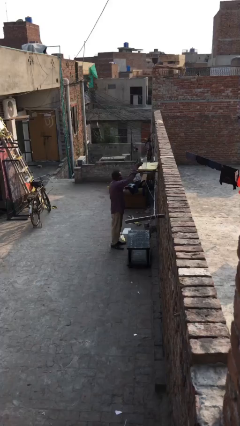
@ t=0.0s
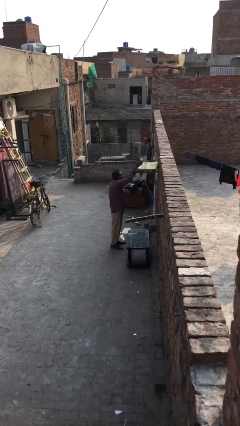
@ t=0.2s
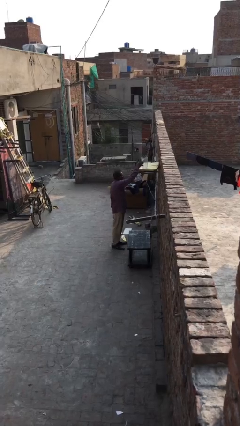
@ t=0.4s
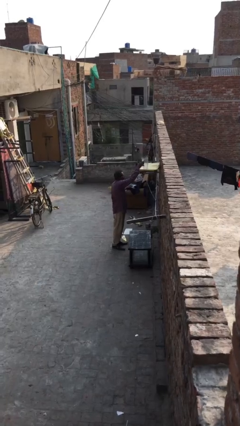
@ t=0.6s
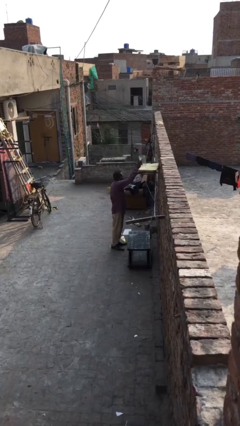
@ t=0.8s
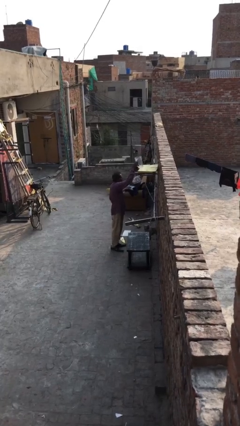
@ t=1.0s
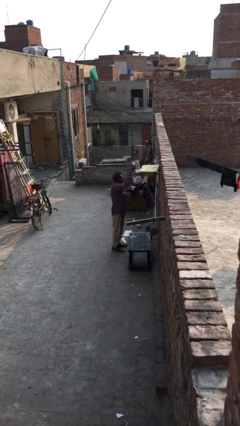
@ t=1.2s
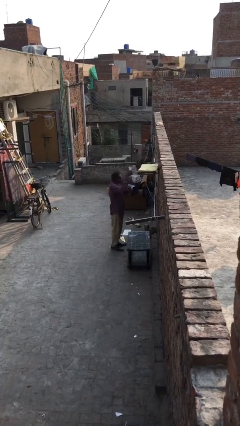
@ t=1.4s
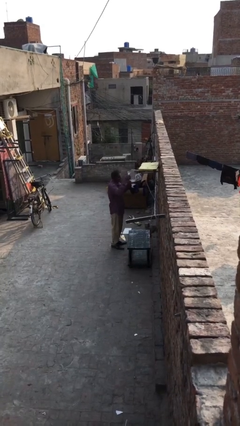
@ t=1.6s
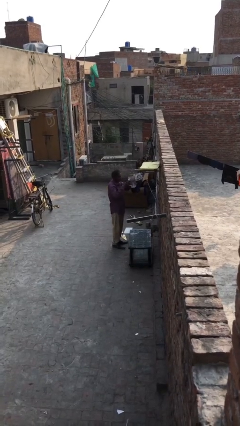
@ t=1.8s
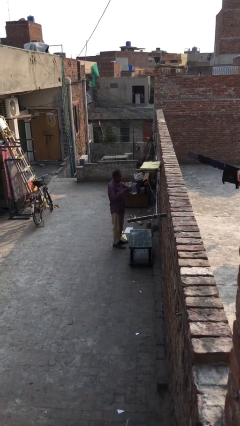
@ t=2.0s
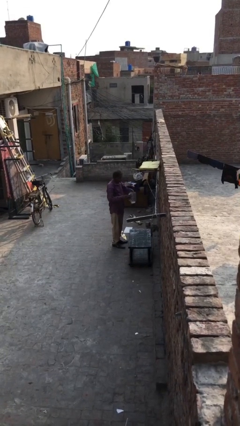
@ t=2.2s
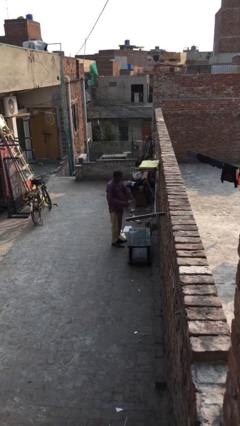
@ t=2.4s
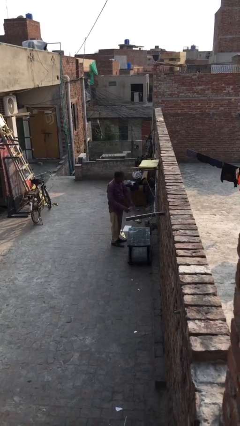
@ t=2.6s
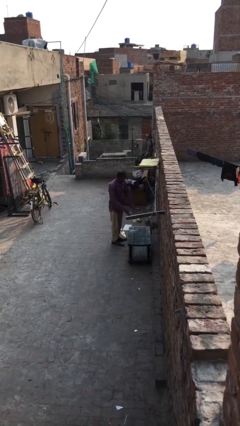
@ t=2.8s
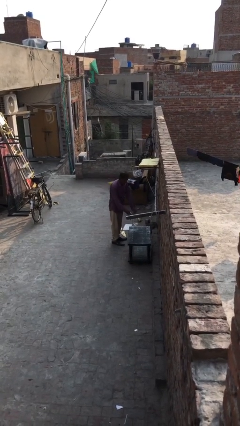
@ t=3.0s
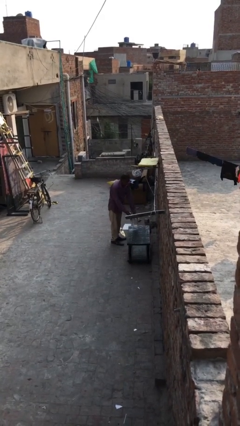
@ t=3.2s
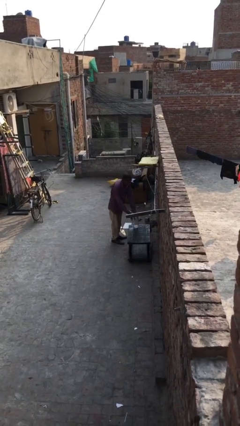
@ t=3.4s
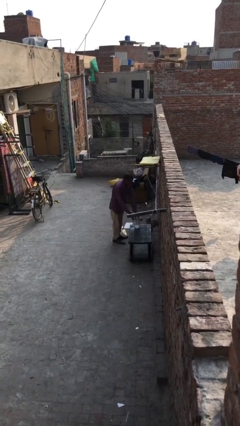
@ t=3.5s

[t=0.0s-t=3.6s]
person picks up object from shelf

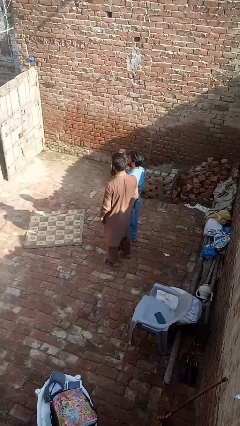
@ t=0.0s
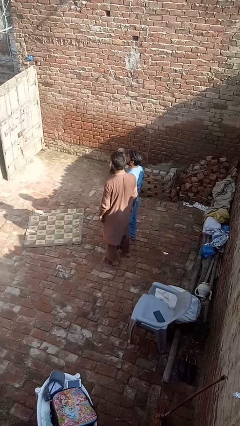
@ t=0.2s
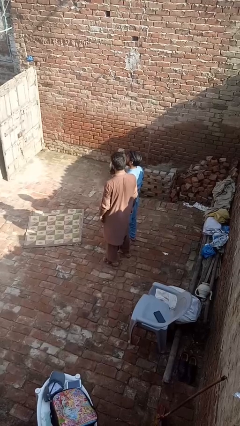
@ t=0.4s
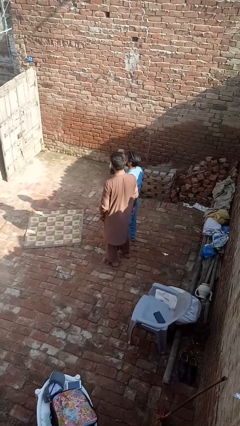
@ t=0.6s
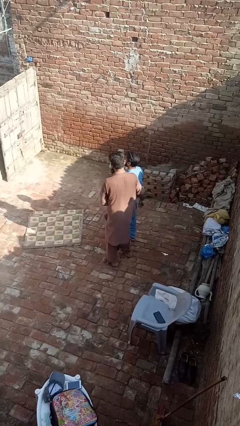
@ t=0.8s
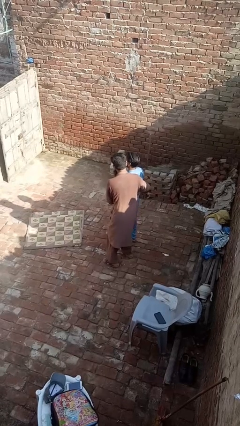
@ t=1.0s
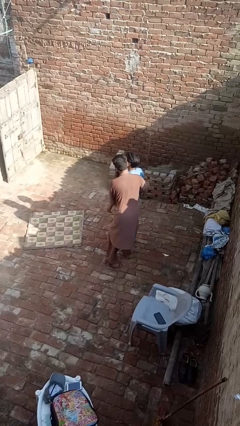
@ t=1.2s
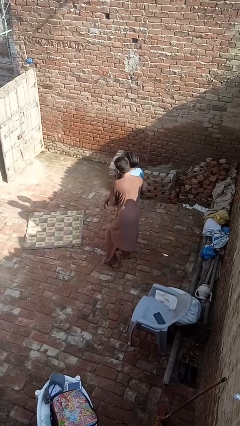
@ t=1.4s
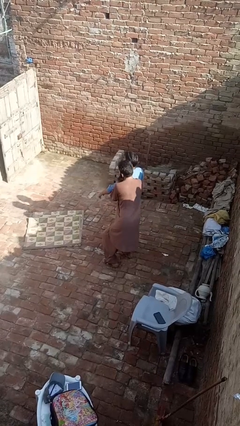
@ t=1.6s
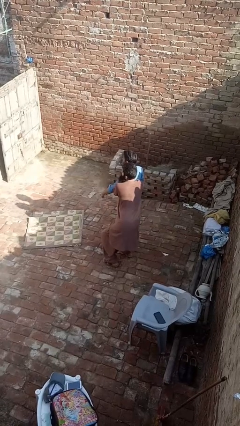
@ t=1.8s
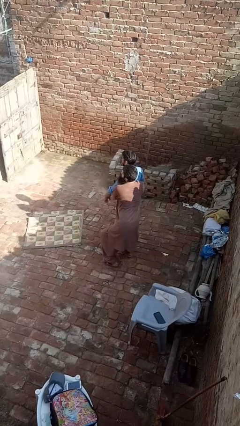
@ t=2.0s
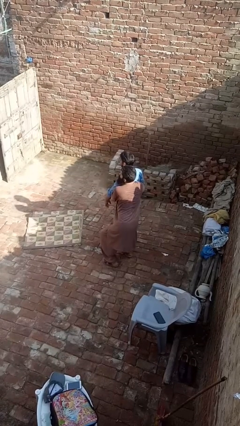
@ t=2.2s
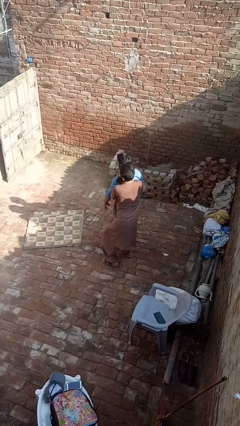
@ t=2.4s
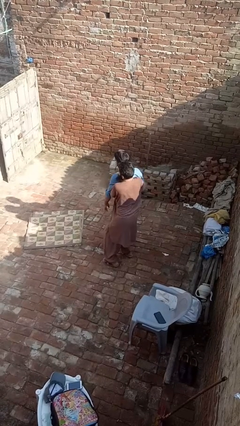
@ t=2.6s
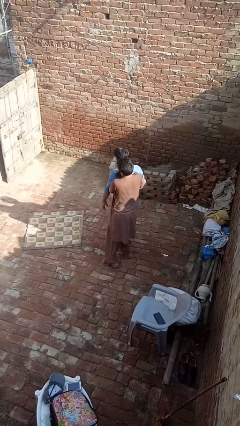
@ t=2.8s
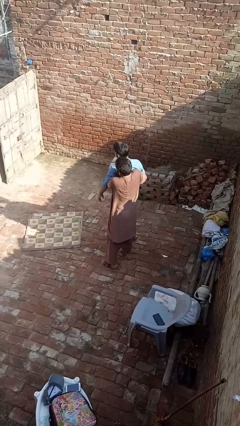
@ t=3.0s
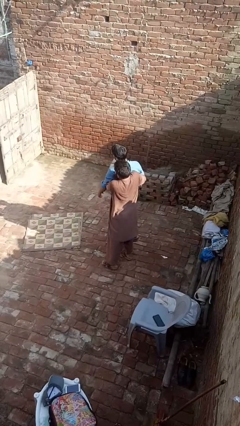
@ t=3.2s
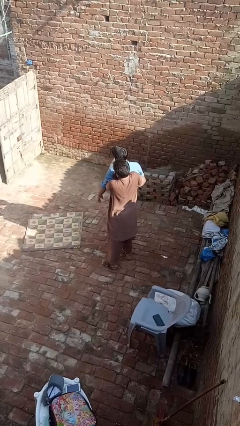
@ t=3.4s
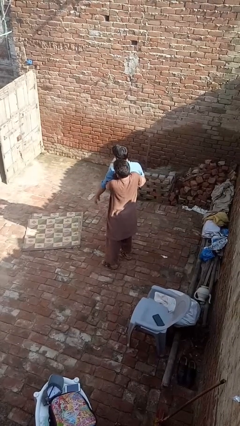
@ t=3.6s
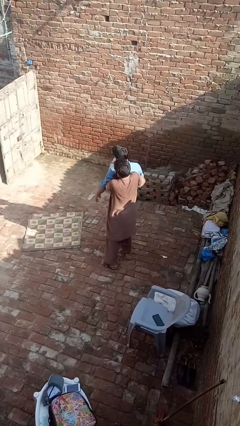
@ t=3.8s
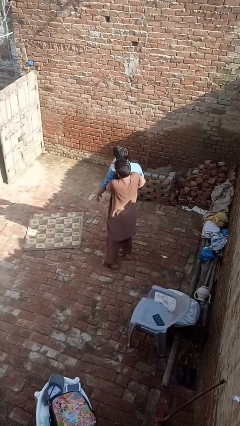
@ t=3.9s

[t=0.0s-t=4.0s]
person picks up person

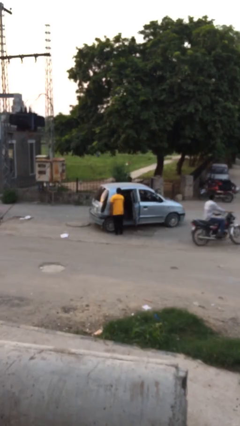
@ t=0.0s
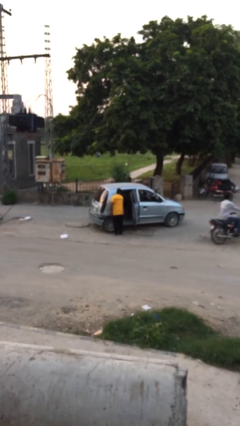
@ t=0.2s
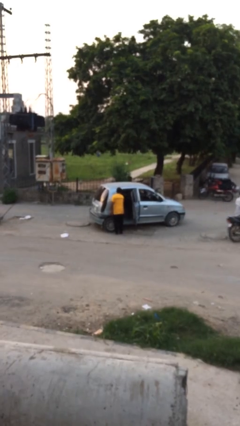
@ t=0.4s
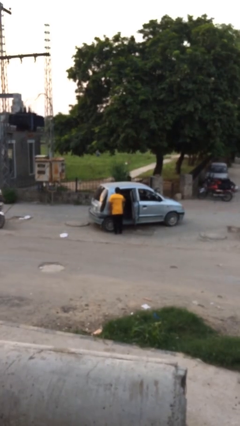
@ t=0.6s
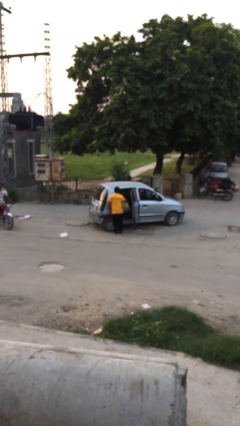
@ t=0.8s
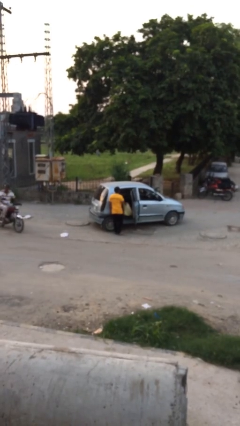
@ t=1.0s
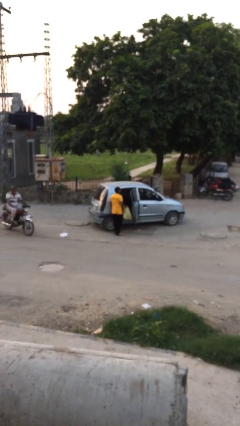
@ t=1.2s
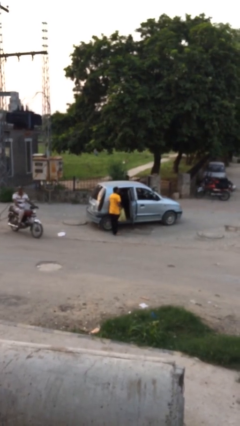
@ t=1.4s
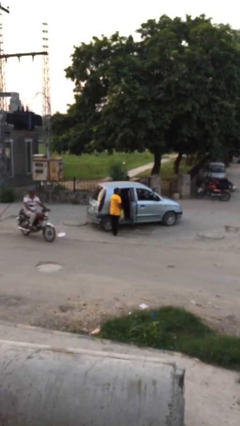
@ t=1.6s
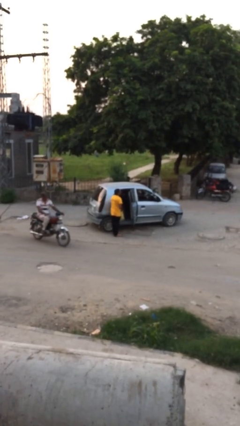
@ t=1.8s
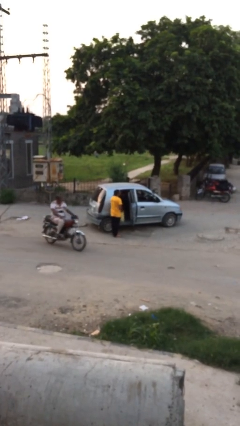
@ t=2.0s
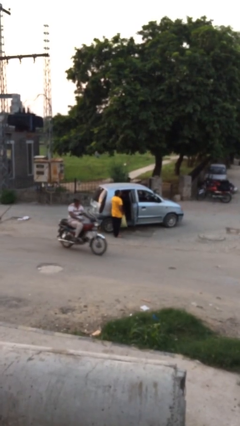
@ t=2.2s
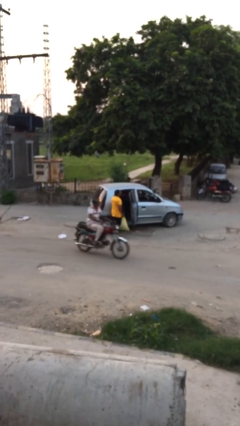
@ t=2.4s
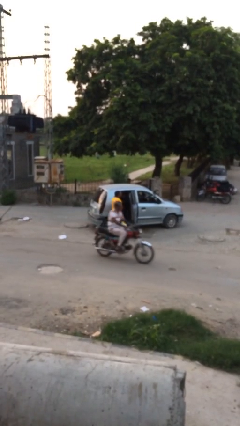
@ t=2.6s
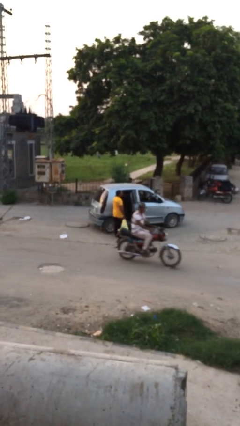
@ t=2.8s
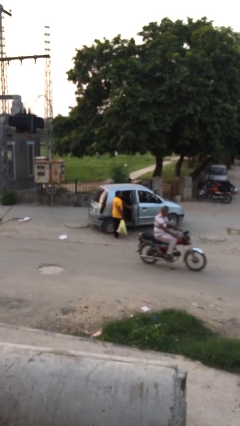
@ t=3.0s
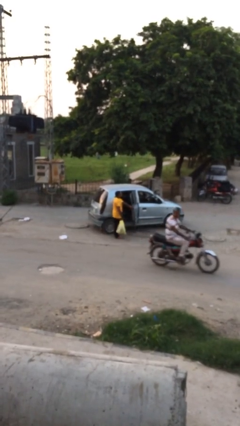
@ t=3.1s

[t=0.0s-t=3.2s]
person unloads car

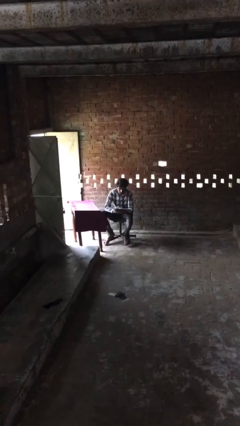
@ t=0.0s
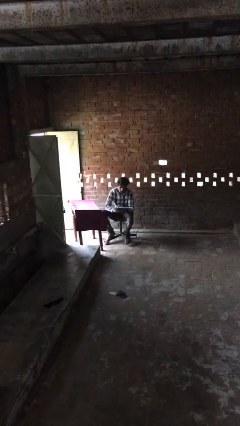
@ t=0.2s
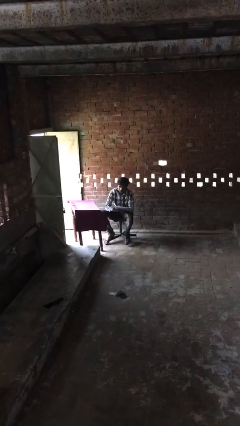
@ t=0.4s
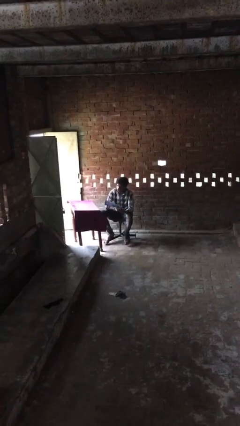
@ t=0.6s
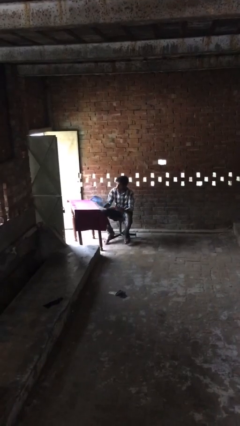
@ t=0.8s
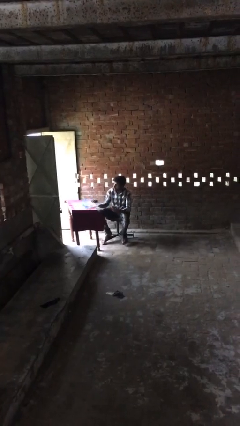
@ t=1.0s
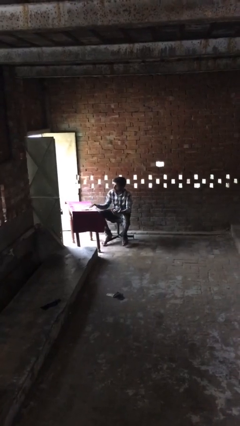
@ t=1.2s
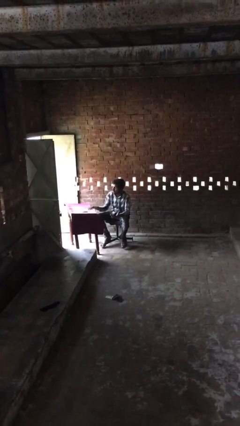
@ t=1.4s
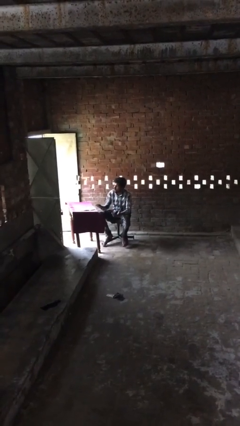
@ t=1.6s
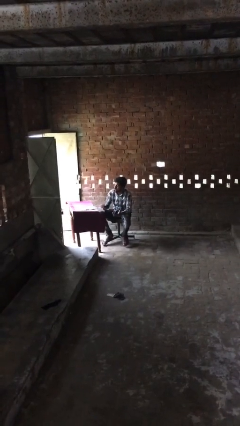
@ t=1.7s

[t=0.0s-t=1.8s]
person puts down object on table

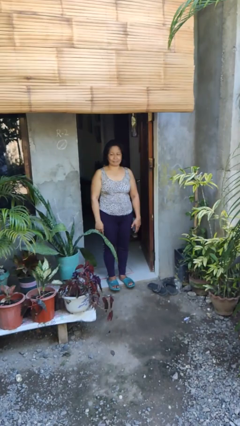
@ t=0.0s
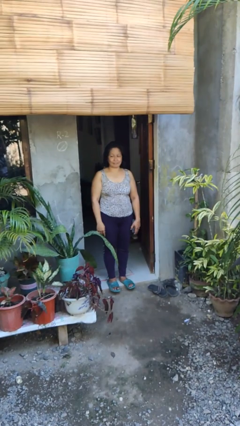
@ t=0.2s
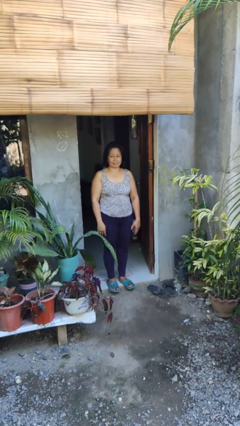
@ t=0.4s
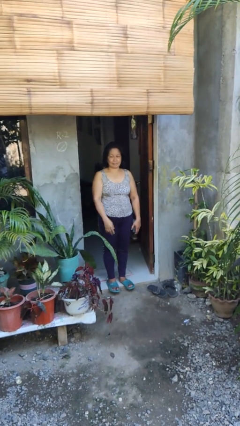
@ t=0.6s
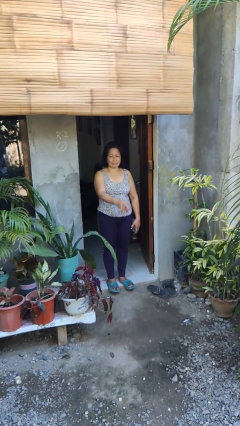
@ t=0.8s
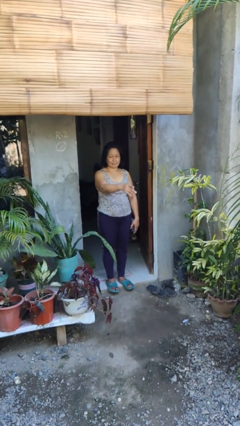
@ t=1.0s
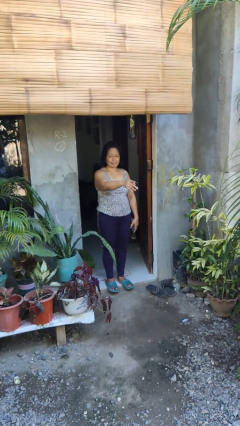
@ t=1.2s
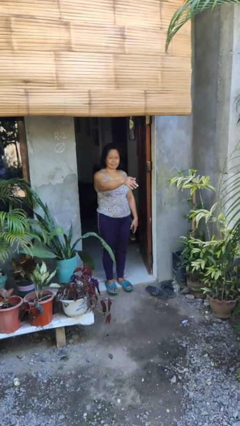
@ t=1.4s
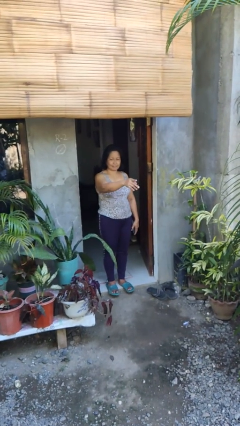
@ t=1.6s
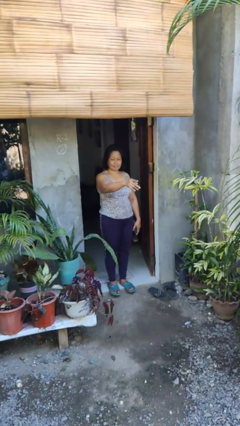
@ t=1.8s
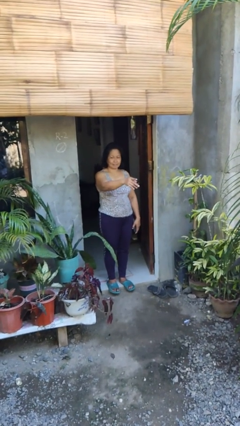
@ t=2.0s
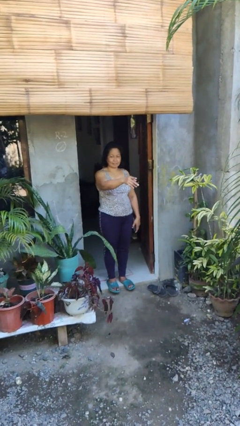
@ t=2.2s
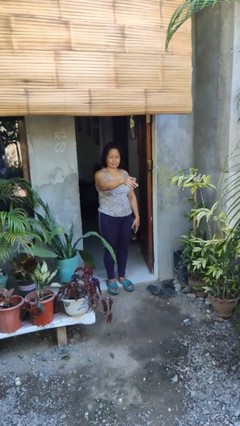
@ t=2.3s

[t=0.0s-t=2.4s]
person points at person

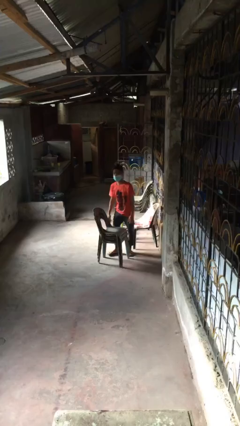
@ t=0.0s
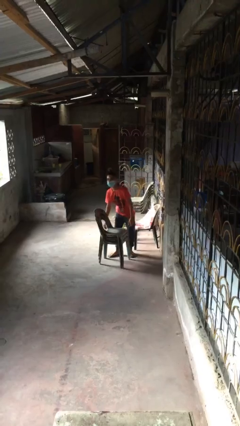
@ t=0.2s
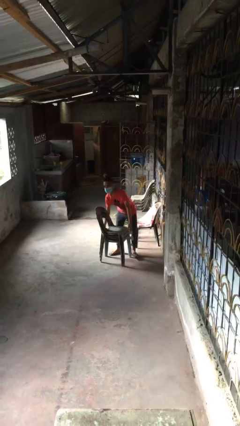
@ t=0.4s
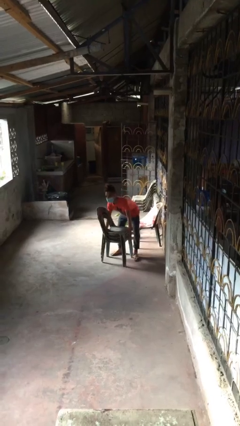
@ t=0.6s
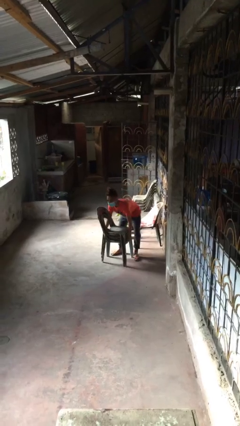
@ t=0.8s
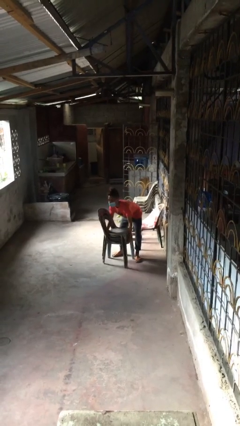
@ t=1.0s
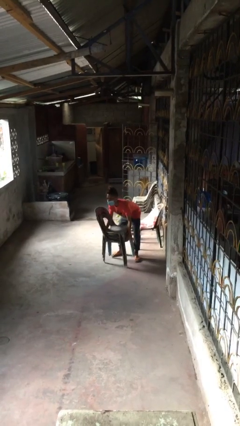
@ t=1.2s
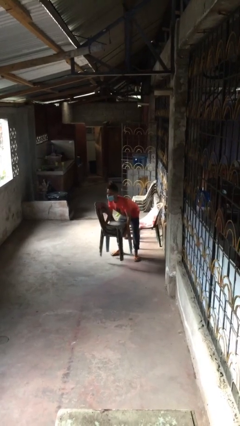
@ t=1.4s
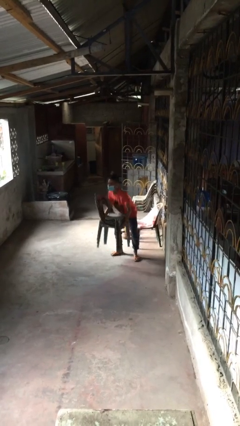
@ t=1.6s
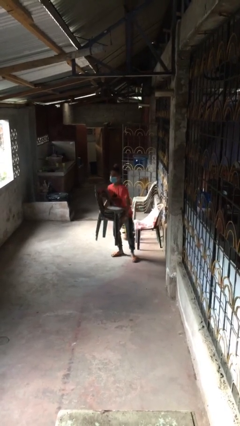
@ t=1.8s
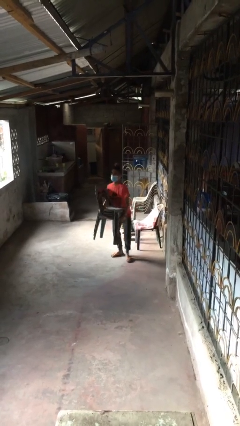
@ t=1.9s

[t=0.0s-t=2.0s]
person picks up object from floor
